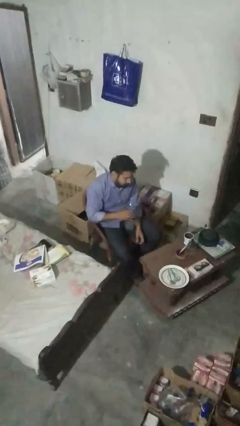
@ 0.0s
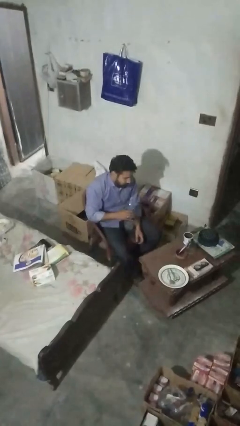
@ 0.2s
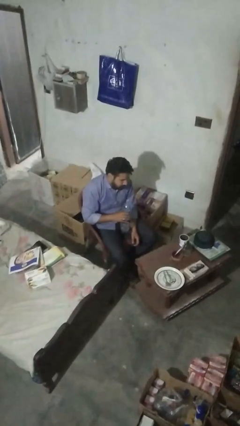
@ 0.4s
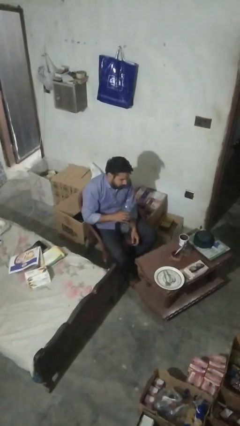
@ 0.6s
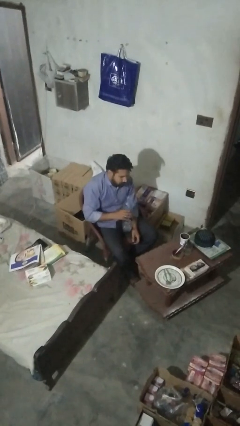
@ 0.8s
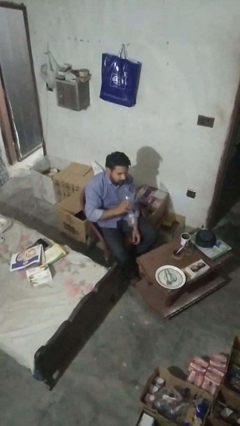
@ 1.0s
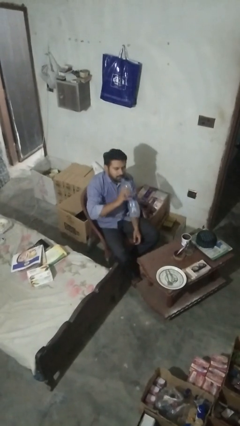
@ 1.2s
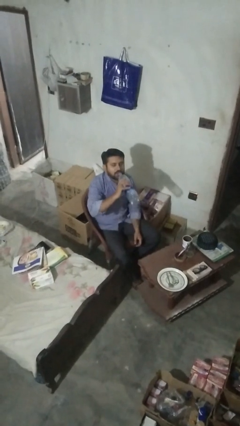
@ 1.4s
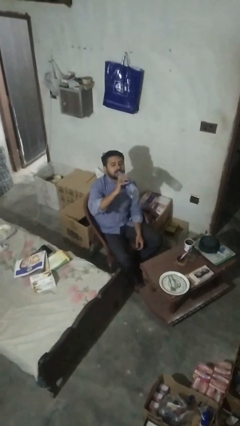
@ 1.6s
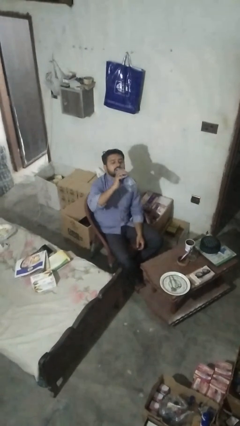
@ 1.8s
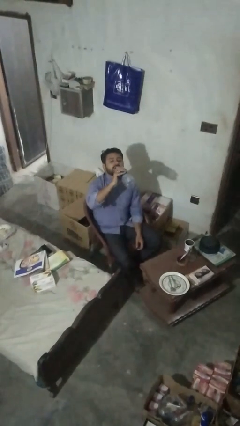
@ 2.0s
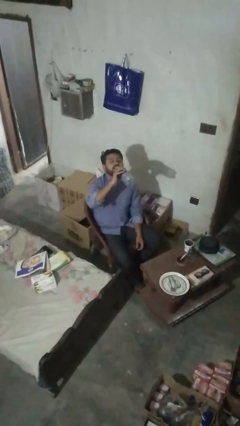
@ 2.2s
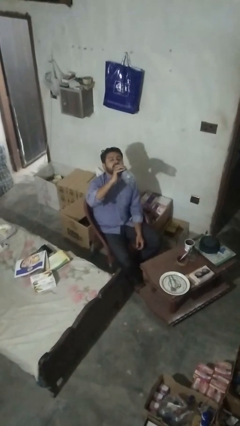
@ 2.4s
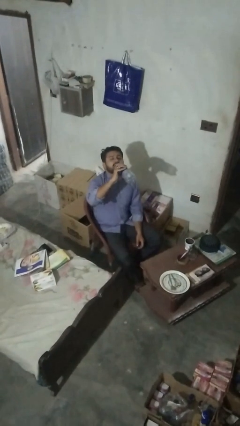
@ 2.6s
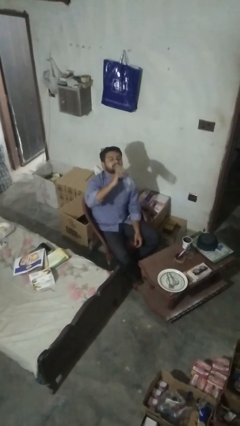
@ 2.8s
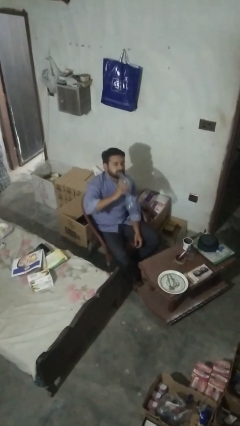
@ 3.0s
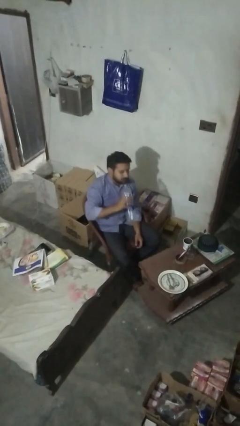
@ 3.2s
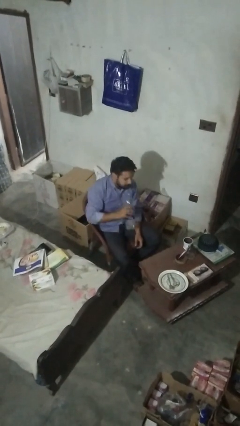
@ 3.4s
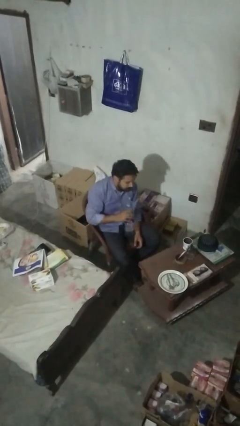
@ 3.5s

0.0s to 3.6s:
person drinks from bottle

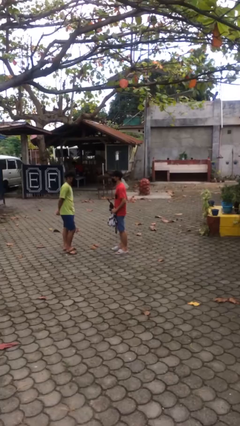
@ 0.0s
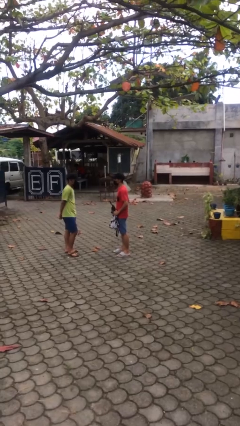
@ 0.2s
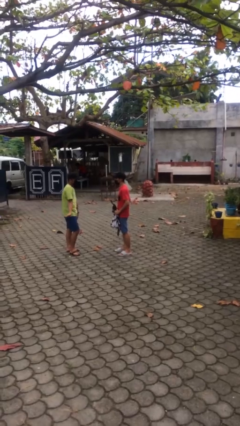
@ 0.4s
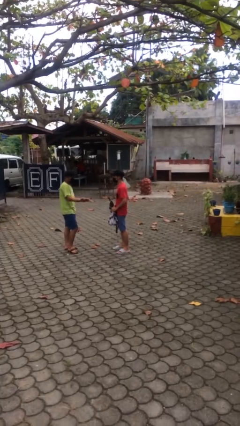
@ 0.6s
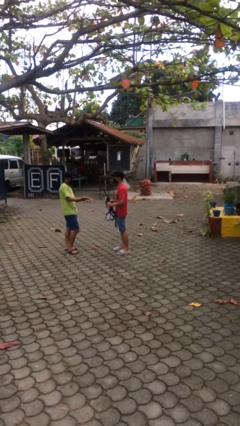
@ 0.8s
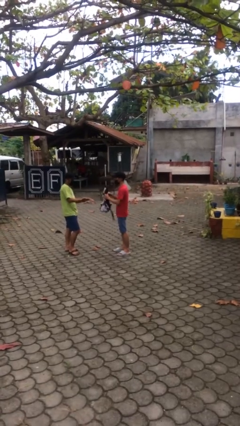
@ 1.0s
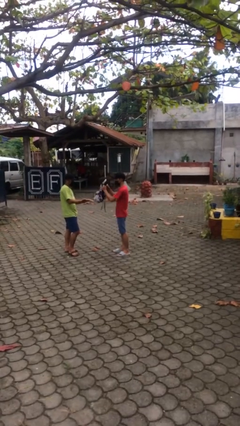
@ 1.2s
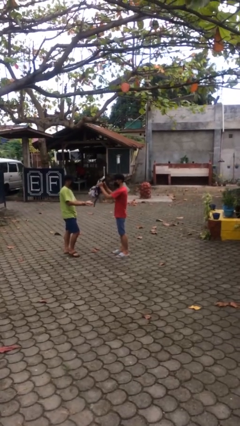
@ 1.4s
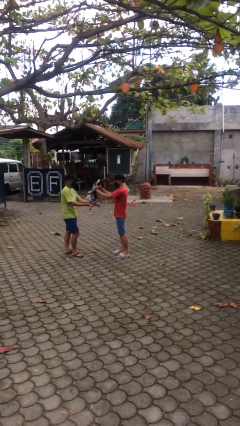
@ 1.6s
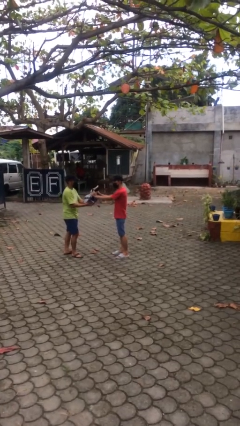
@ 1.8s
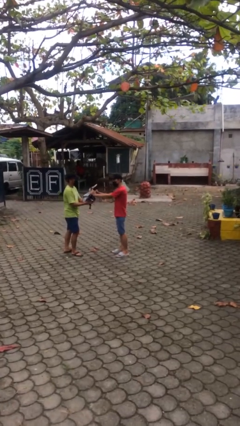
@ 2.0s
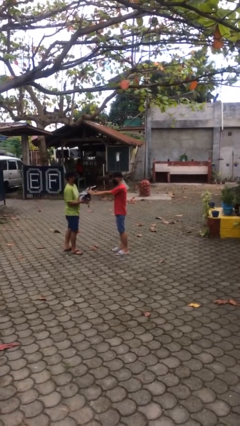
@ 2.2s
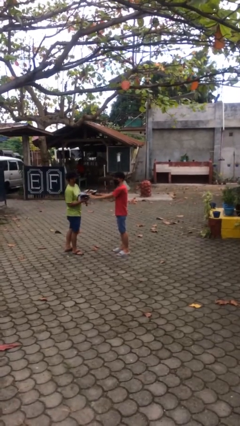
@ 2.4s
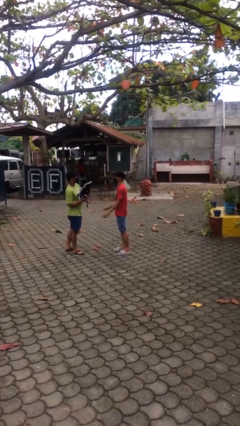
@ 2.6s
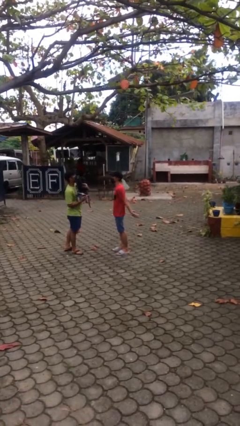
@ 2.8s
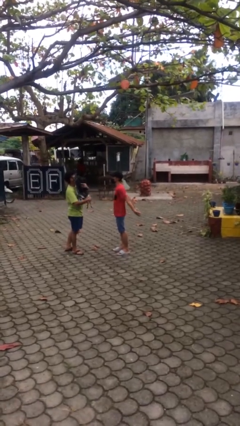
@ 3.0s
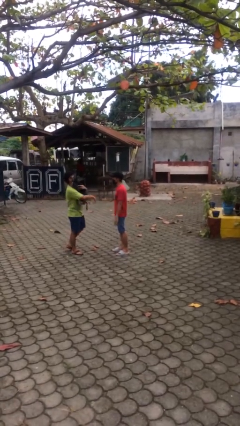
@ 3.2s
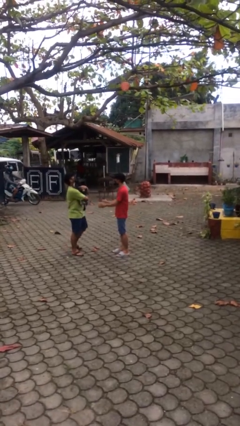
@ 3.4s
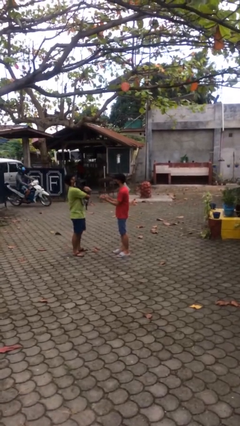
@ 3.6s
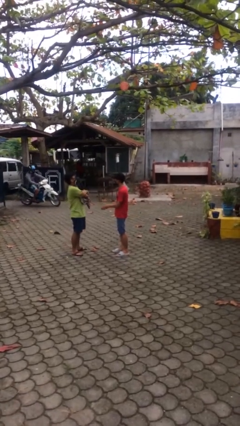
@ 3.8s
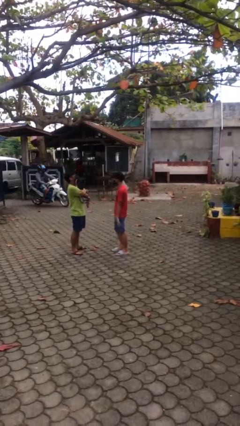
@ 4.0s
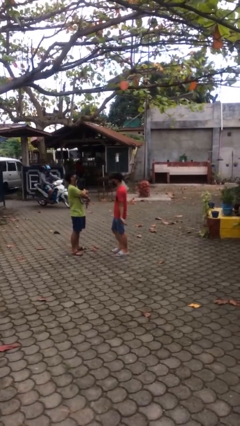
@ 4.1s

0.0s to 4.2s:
person transfers object to person

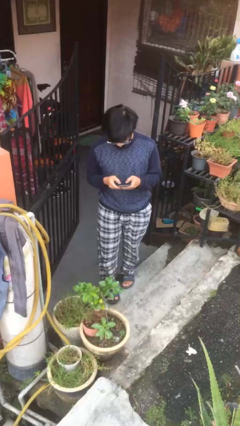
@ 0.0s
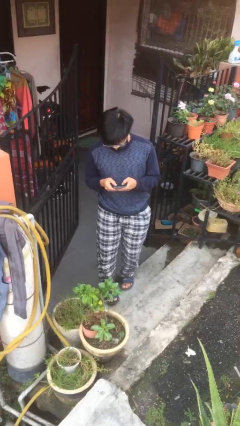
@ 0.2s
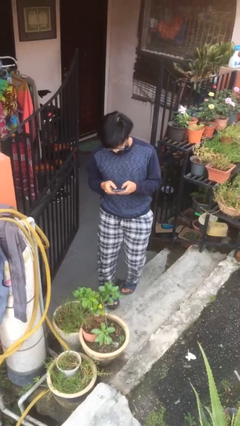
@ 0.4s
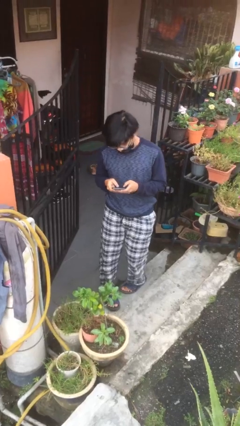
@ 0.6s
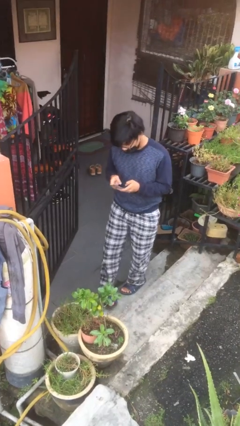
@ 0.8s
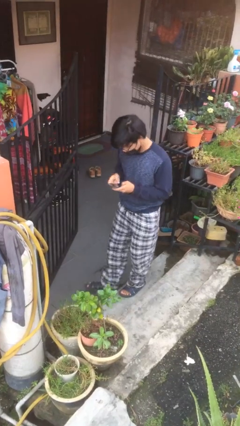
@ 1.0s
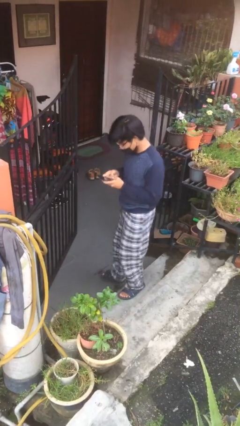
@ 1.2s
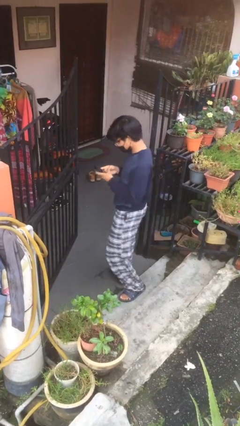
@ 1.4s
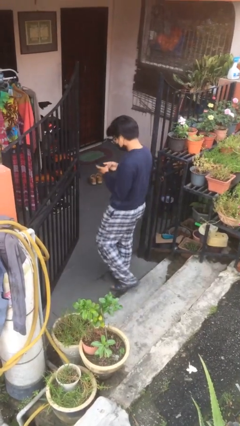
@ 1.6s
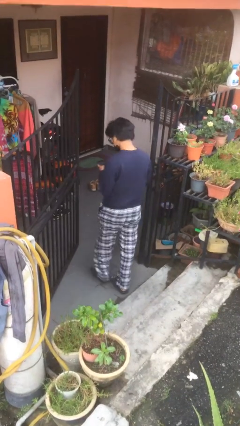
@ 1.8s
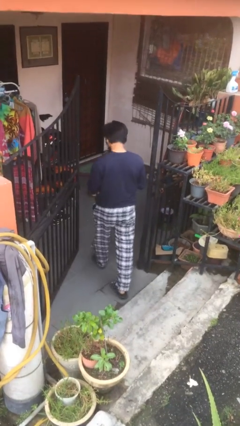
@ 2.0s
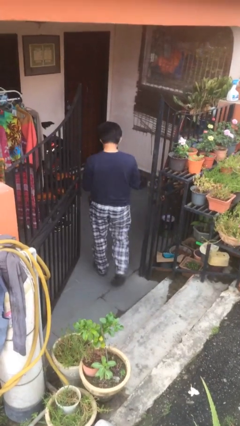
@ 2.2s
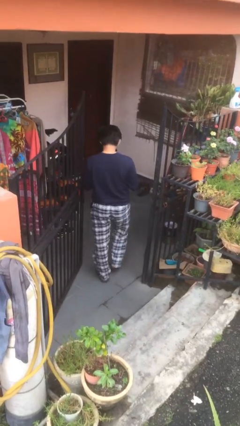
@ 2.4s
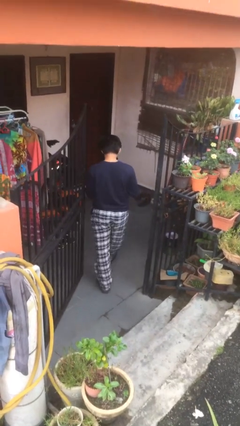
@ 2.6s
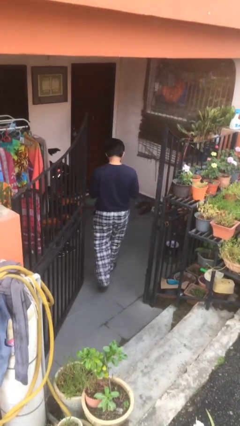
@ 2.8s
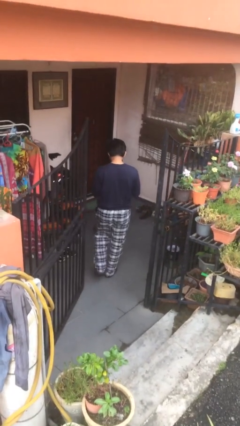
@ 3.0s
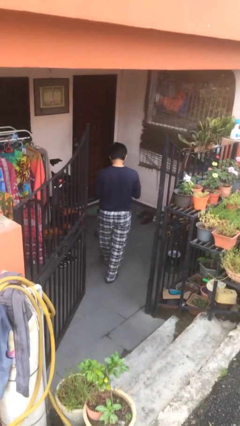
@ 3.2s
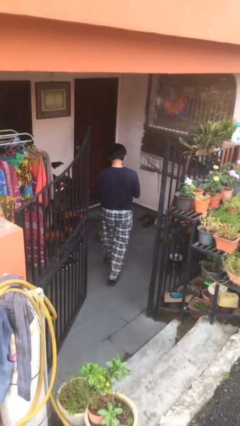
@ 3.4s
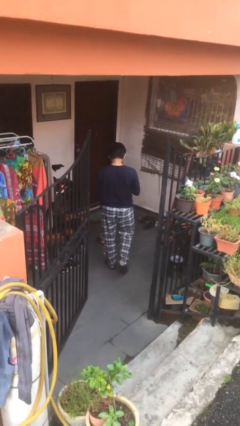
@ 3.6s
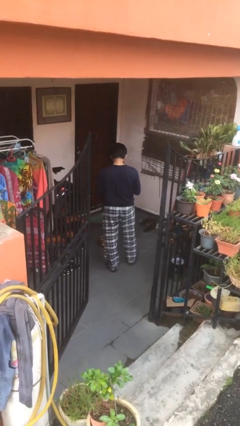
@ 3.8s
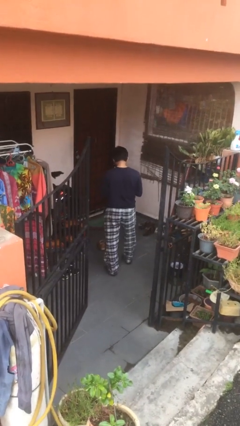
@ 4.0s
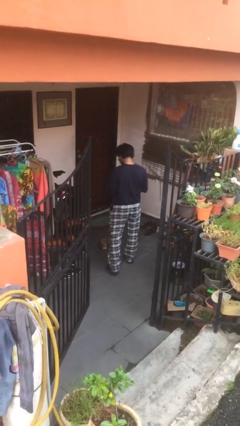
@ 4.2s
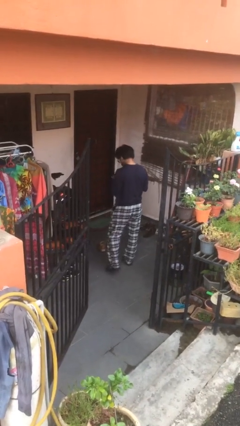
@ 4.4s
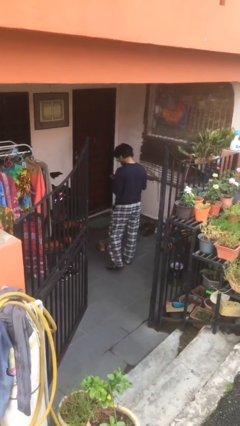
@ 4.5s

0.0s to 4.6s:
person exits scene through structure

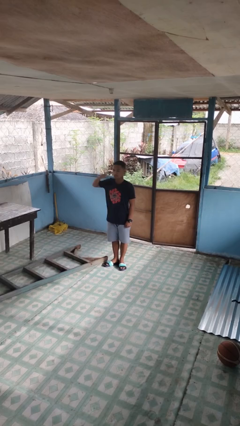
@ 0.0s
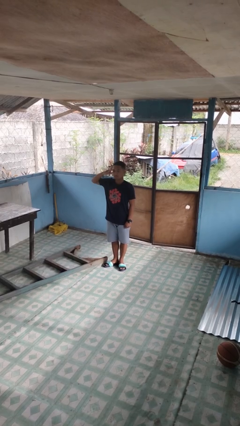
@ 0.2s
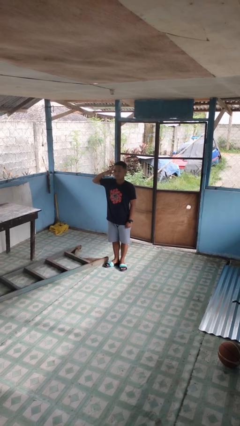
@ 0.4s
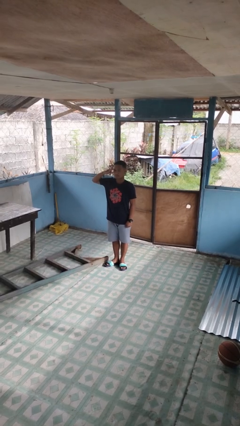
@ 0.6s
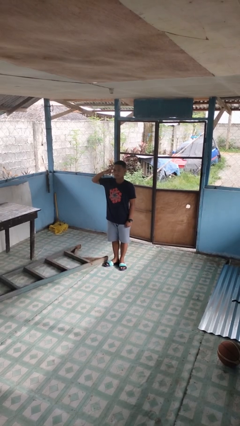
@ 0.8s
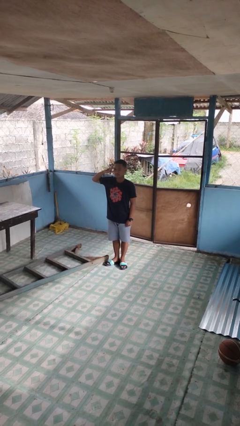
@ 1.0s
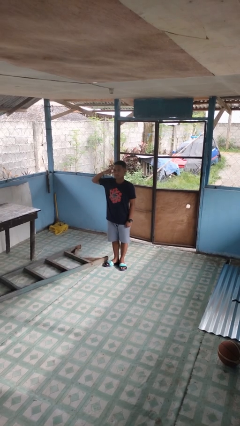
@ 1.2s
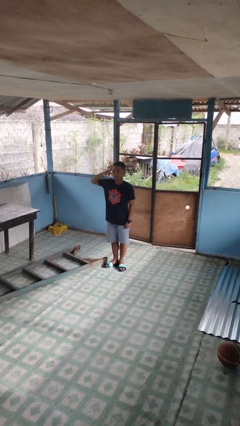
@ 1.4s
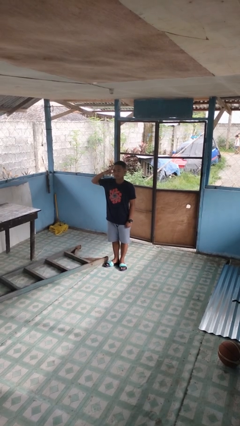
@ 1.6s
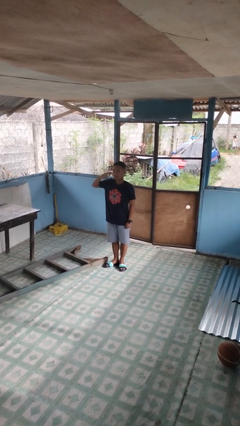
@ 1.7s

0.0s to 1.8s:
person salutes

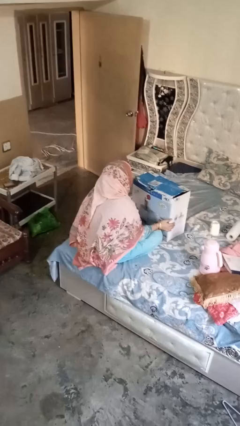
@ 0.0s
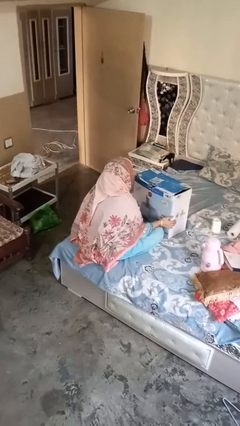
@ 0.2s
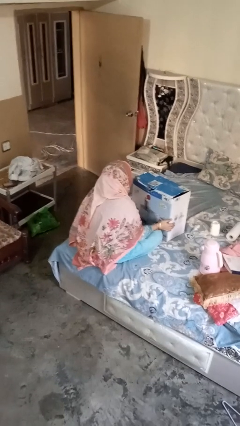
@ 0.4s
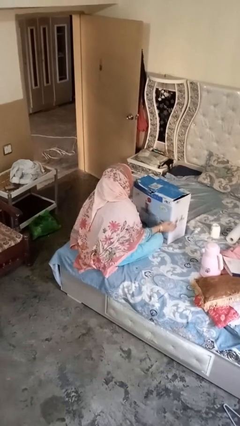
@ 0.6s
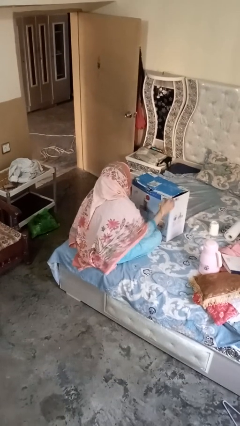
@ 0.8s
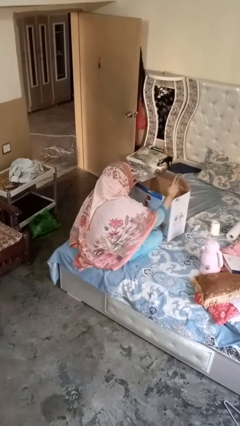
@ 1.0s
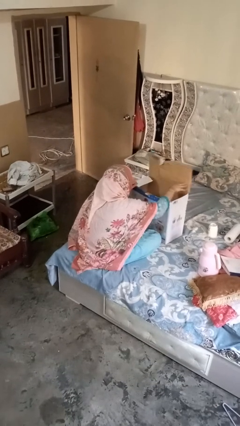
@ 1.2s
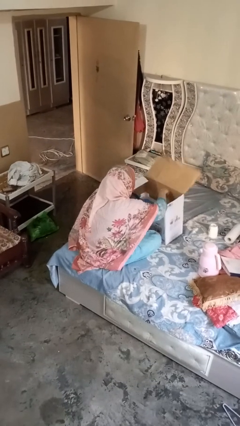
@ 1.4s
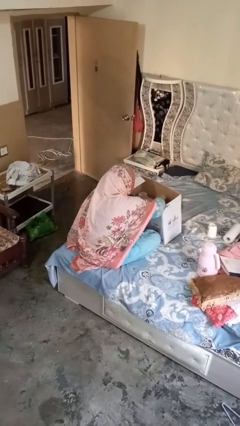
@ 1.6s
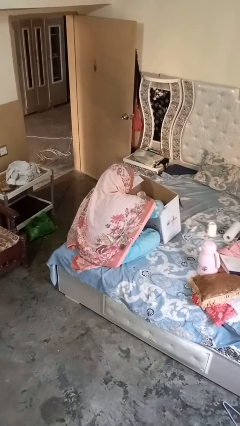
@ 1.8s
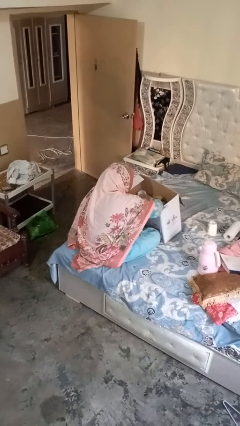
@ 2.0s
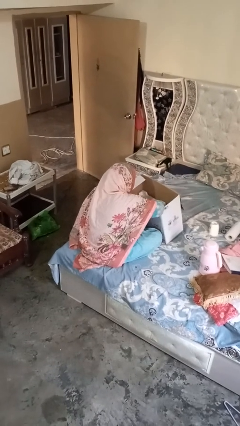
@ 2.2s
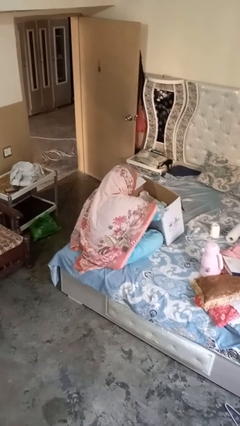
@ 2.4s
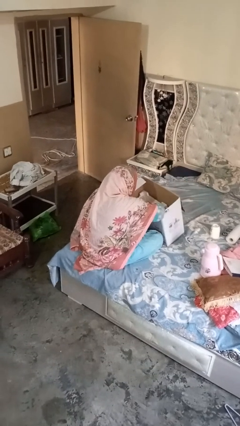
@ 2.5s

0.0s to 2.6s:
person searches in box

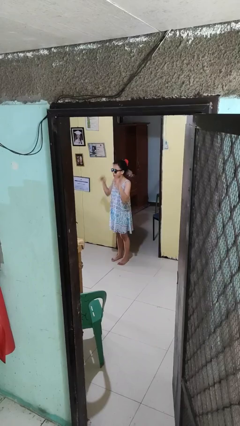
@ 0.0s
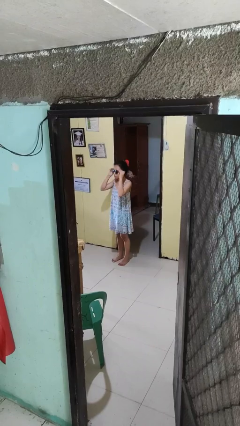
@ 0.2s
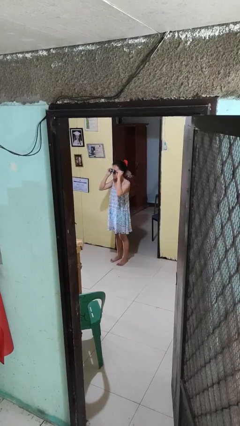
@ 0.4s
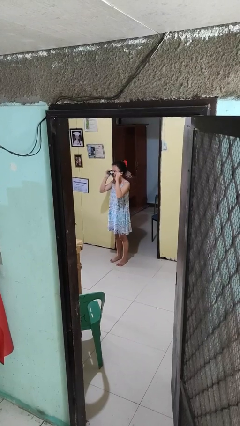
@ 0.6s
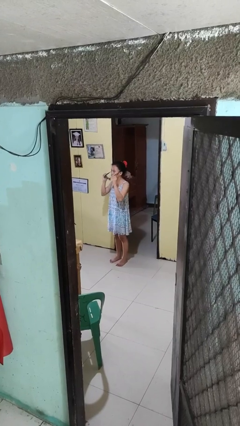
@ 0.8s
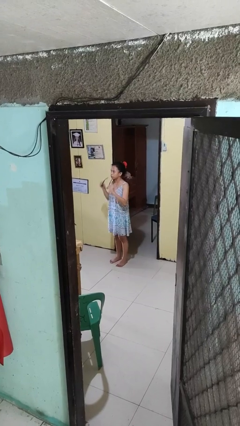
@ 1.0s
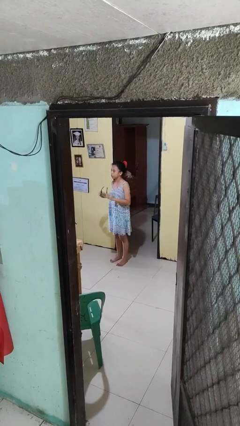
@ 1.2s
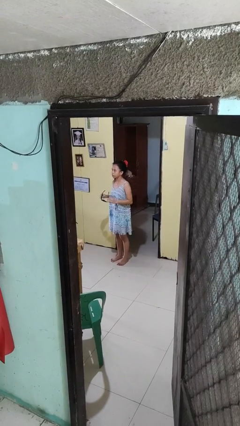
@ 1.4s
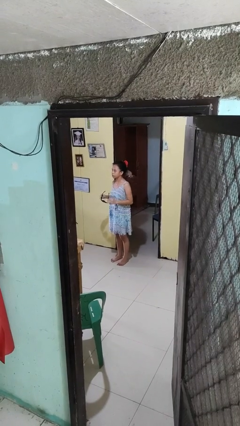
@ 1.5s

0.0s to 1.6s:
person takes off sunglasses
